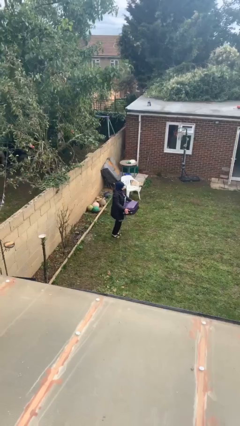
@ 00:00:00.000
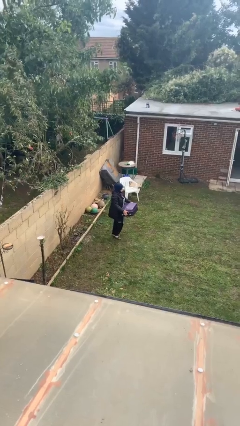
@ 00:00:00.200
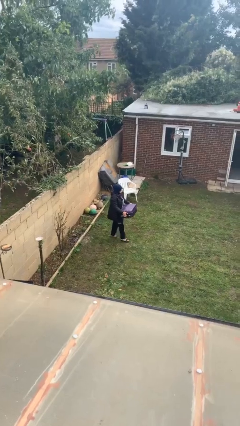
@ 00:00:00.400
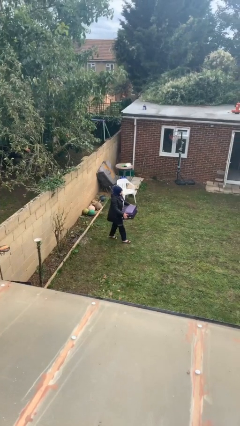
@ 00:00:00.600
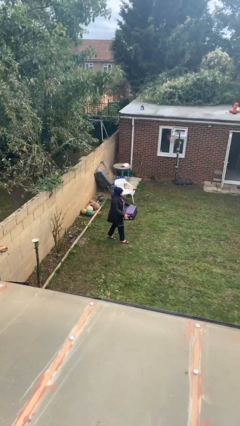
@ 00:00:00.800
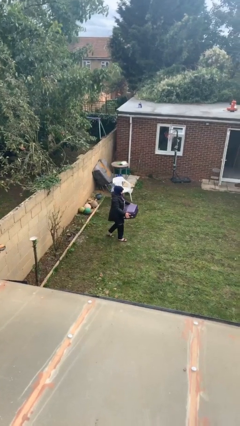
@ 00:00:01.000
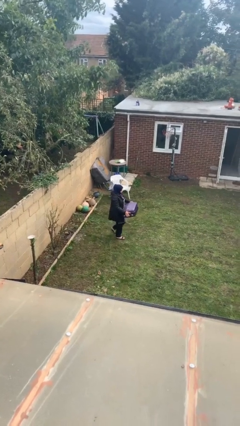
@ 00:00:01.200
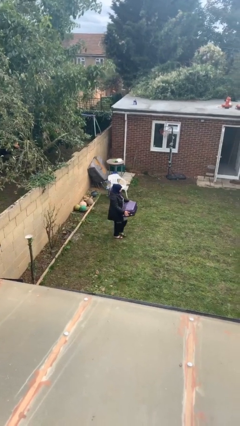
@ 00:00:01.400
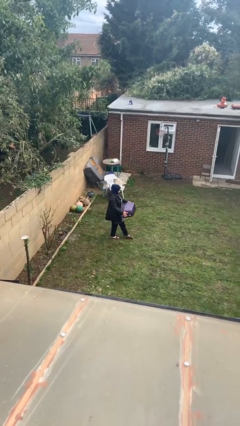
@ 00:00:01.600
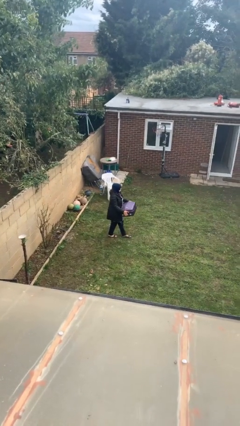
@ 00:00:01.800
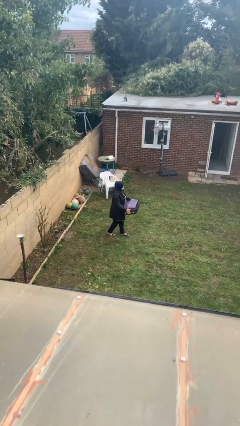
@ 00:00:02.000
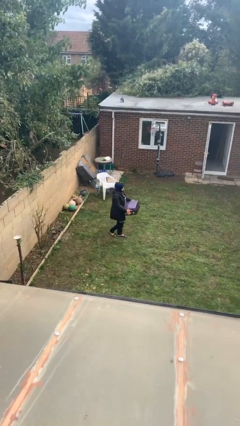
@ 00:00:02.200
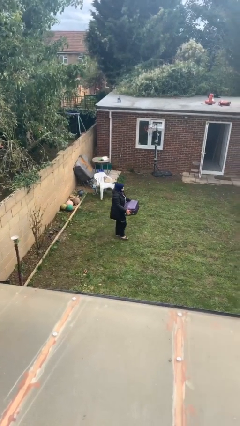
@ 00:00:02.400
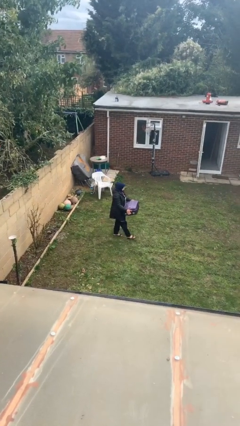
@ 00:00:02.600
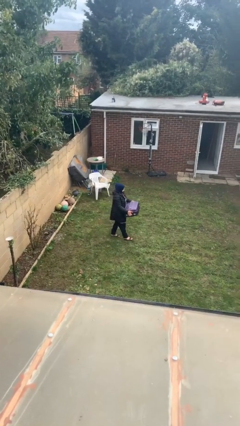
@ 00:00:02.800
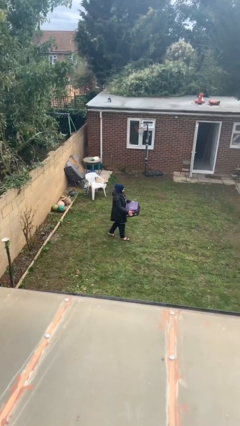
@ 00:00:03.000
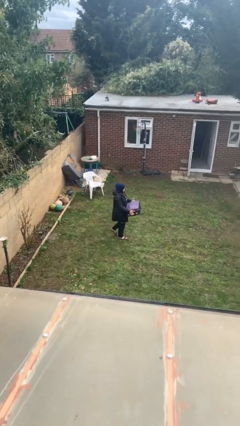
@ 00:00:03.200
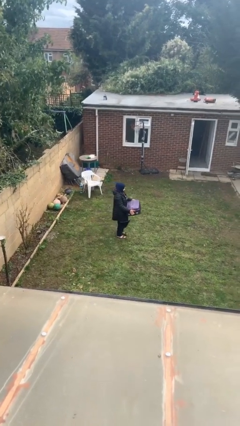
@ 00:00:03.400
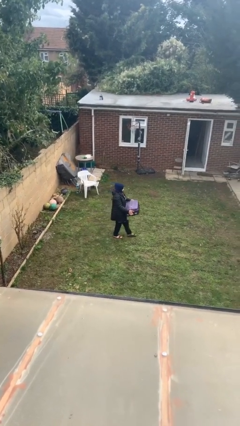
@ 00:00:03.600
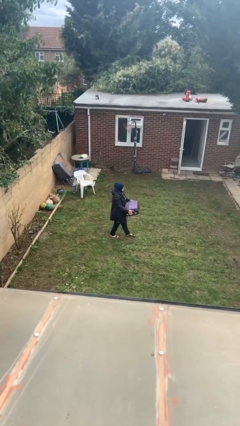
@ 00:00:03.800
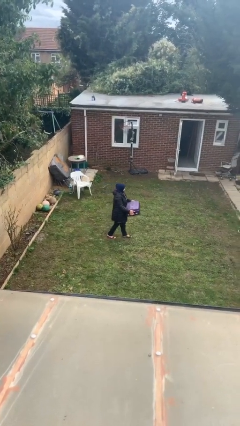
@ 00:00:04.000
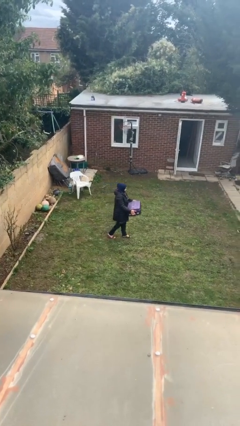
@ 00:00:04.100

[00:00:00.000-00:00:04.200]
person carries heavy object

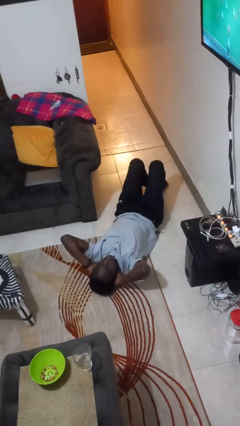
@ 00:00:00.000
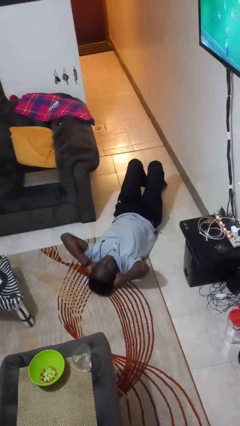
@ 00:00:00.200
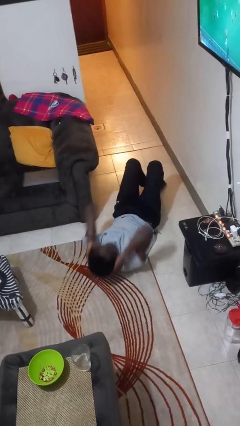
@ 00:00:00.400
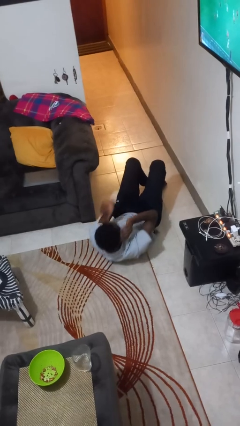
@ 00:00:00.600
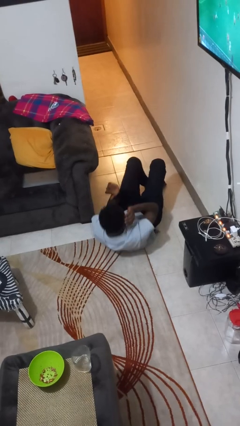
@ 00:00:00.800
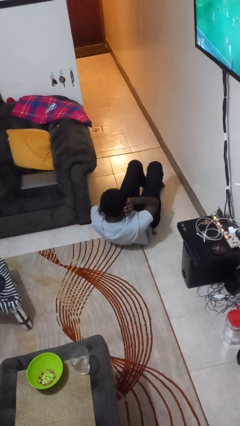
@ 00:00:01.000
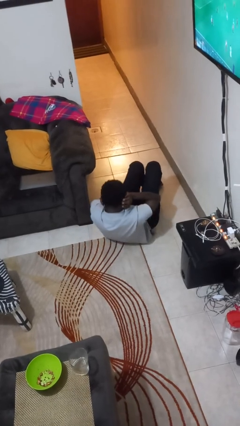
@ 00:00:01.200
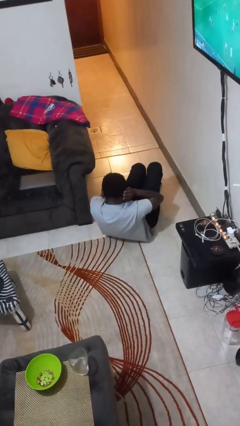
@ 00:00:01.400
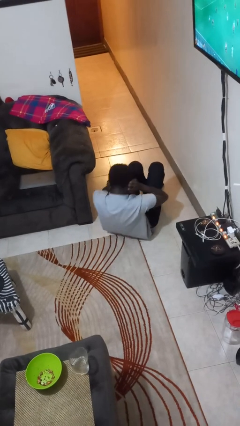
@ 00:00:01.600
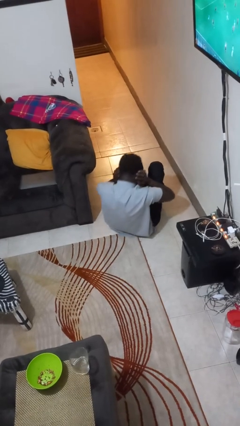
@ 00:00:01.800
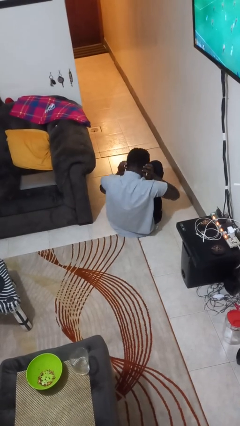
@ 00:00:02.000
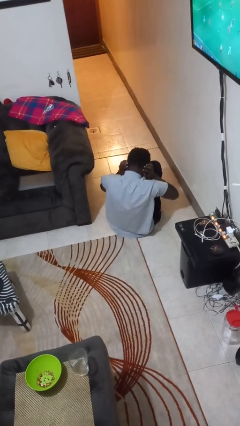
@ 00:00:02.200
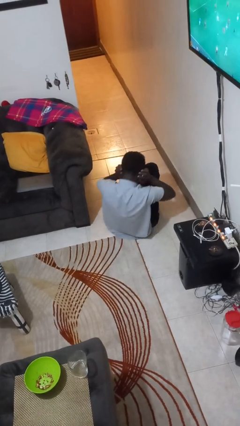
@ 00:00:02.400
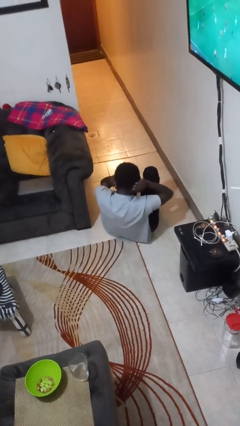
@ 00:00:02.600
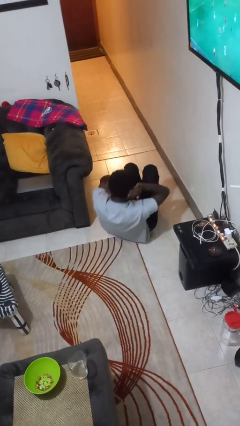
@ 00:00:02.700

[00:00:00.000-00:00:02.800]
person exercises with situp

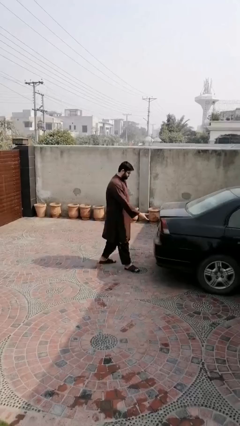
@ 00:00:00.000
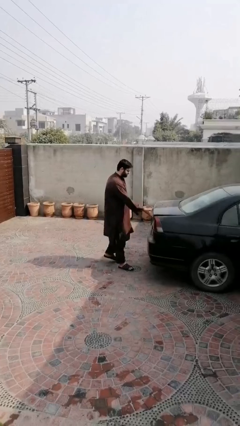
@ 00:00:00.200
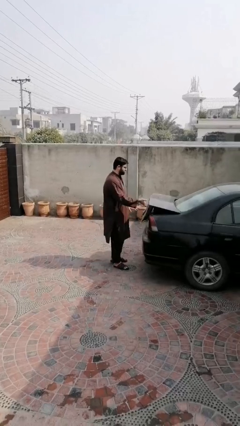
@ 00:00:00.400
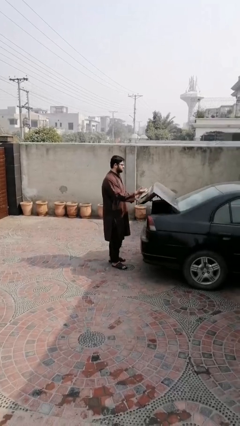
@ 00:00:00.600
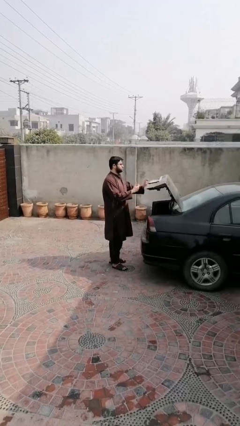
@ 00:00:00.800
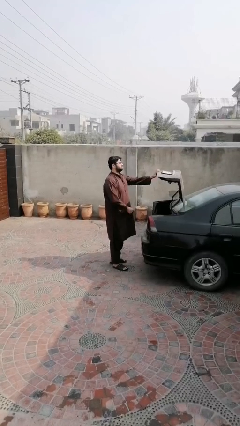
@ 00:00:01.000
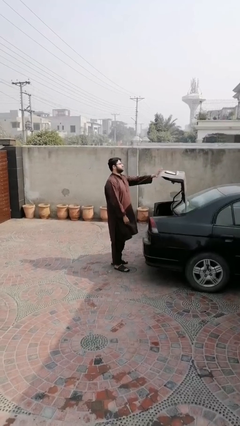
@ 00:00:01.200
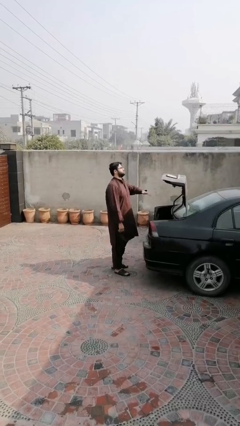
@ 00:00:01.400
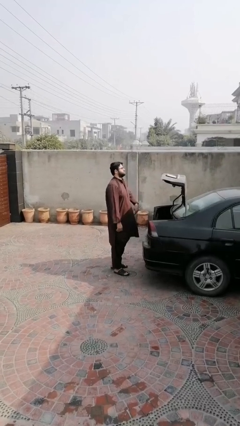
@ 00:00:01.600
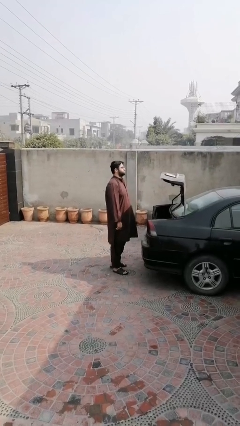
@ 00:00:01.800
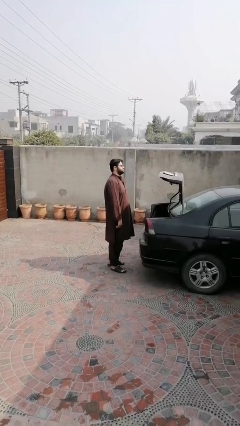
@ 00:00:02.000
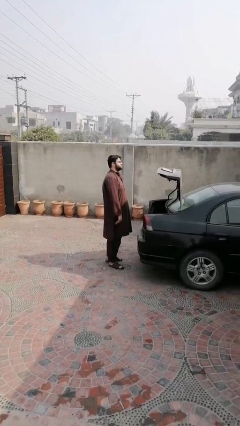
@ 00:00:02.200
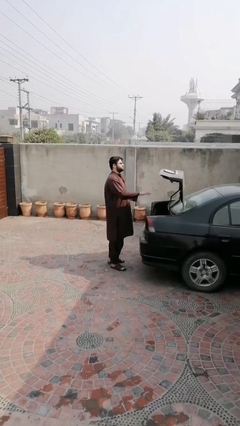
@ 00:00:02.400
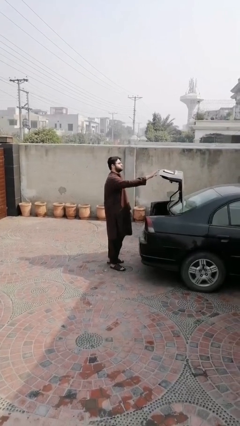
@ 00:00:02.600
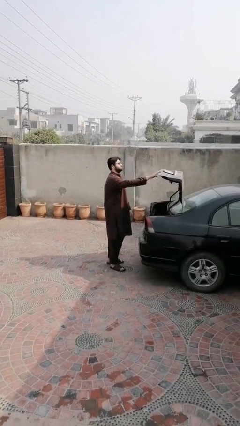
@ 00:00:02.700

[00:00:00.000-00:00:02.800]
person opens car trunk

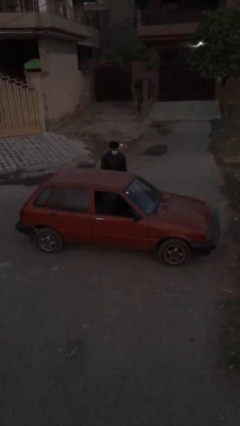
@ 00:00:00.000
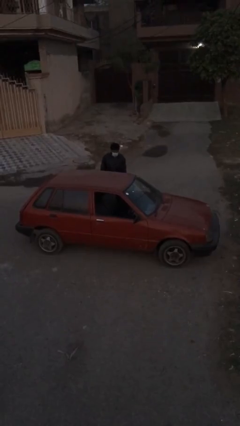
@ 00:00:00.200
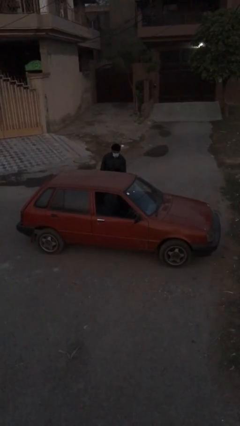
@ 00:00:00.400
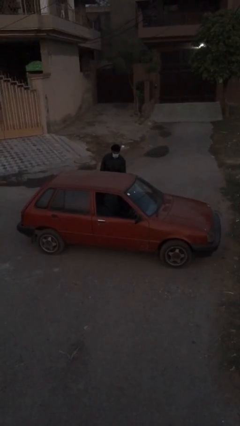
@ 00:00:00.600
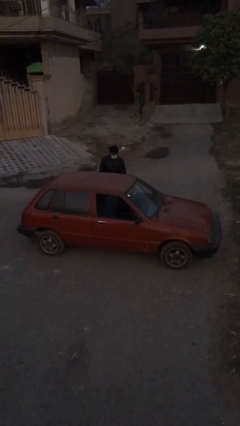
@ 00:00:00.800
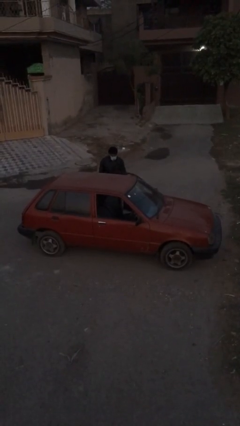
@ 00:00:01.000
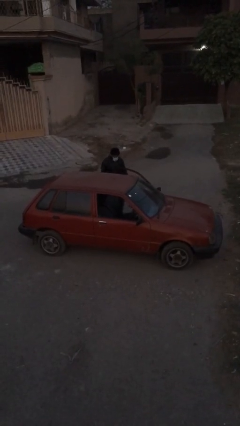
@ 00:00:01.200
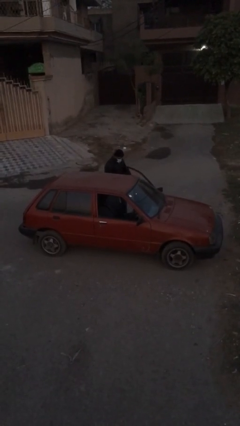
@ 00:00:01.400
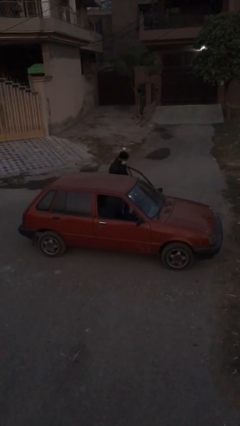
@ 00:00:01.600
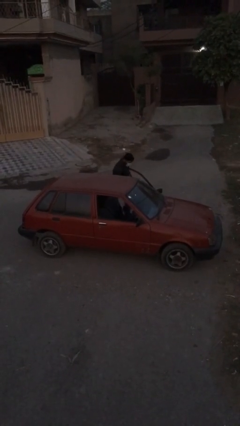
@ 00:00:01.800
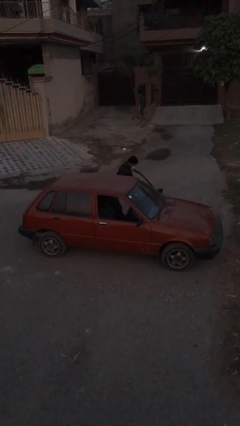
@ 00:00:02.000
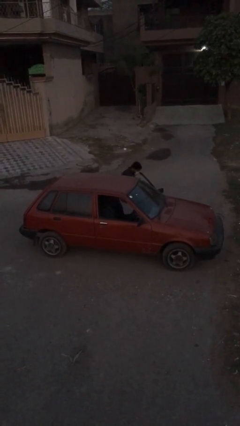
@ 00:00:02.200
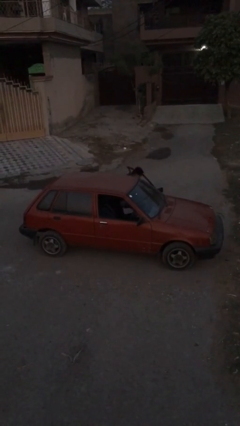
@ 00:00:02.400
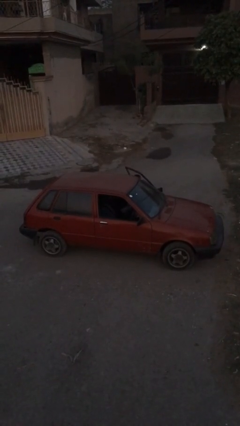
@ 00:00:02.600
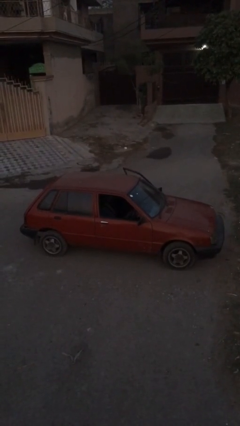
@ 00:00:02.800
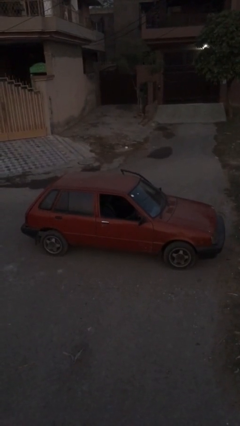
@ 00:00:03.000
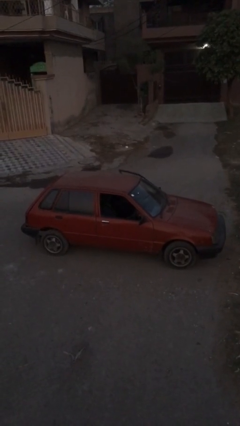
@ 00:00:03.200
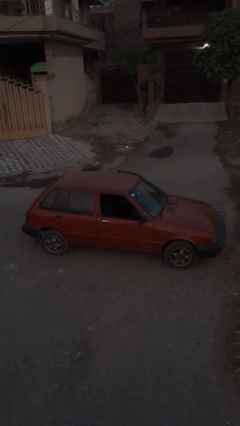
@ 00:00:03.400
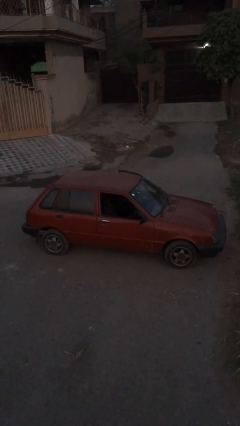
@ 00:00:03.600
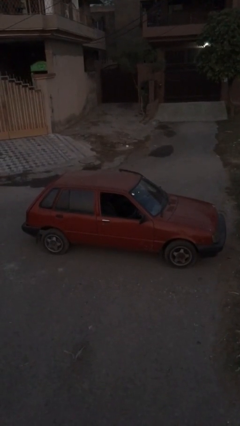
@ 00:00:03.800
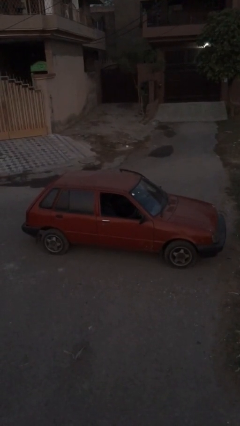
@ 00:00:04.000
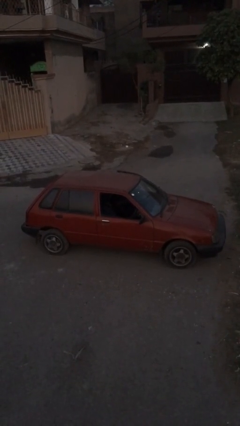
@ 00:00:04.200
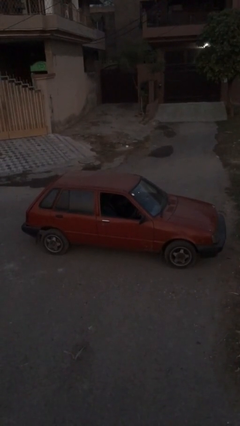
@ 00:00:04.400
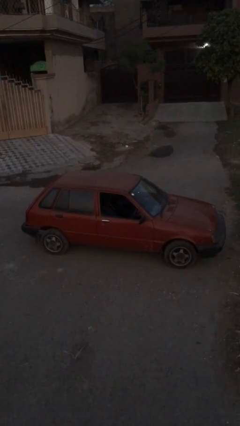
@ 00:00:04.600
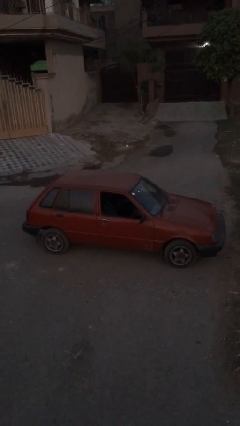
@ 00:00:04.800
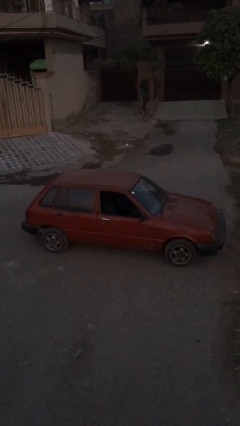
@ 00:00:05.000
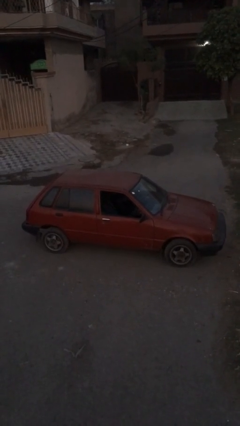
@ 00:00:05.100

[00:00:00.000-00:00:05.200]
car picks up person

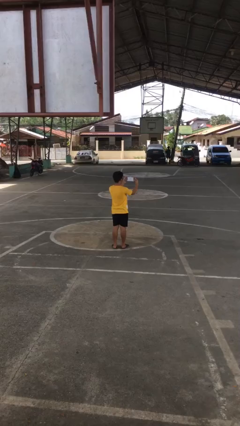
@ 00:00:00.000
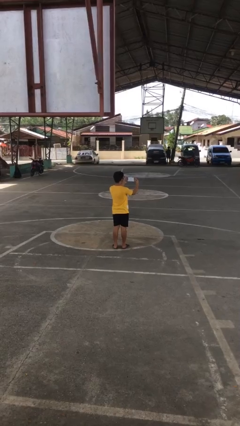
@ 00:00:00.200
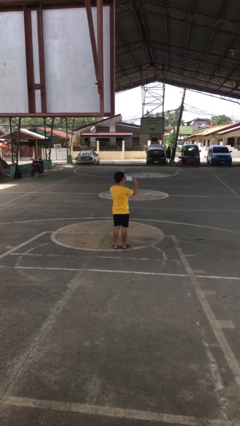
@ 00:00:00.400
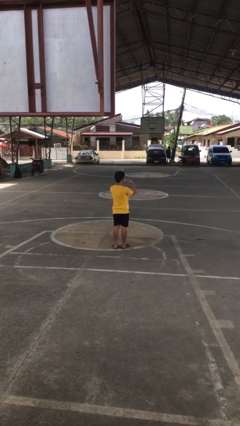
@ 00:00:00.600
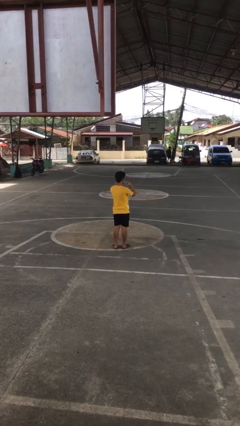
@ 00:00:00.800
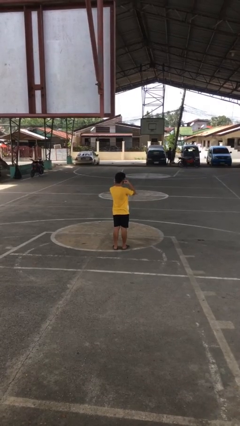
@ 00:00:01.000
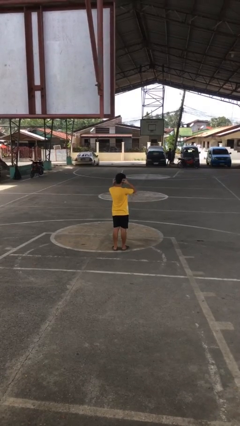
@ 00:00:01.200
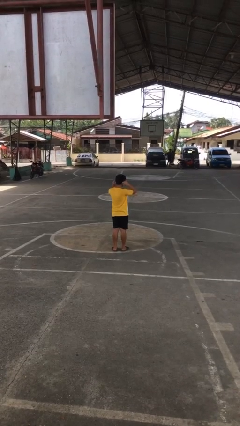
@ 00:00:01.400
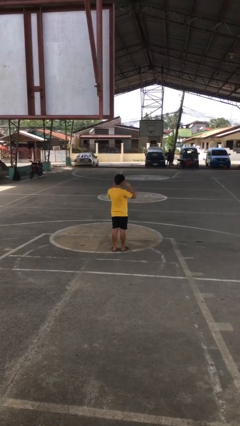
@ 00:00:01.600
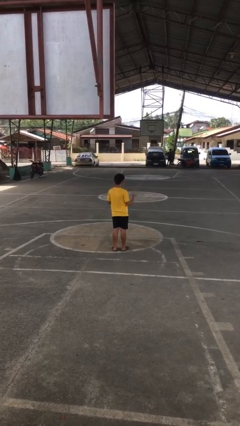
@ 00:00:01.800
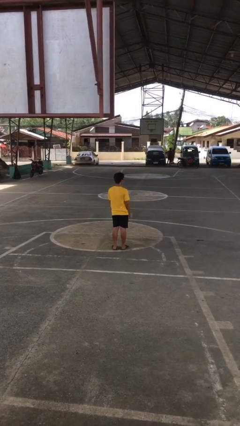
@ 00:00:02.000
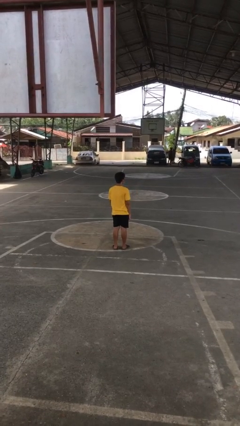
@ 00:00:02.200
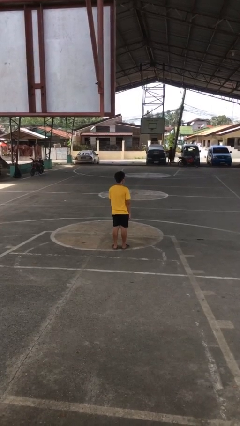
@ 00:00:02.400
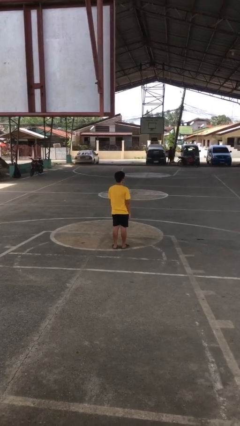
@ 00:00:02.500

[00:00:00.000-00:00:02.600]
person puts on facemask
